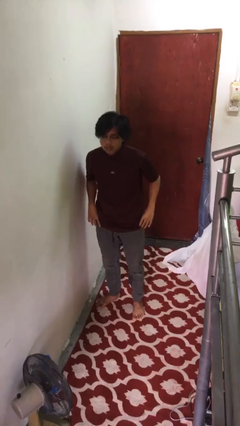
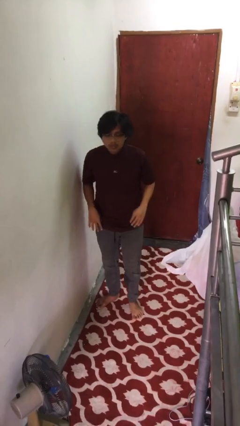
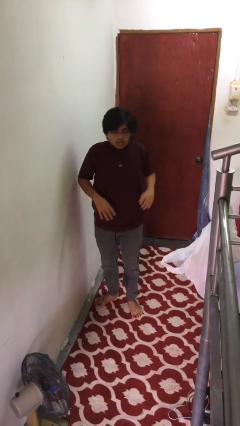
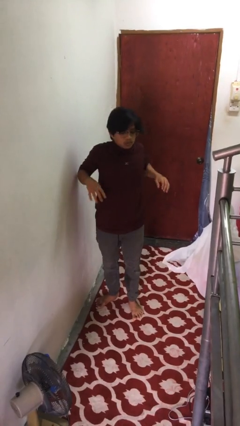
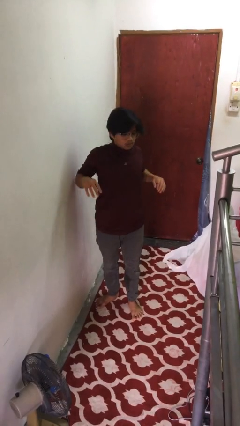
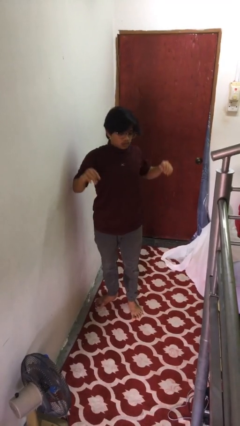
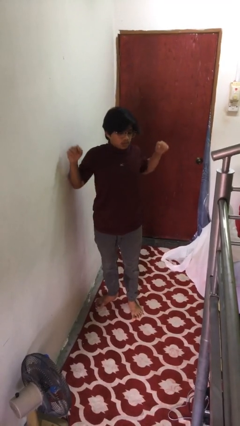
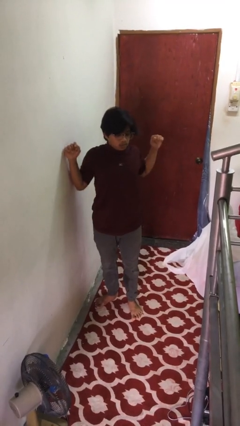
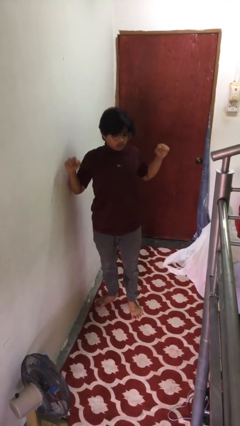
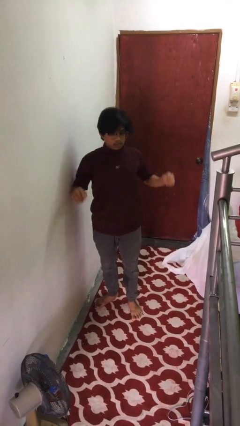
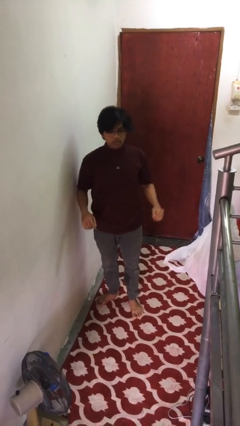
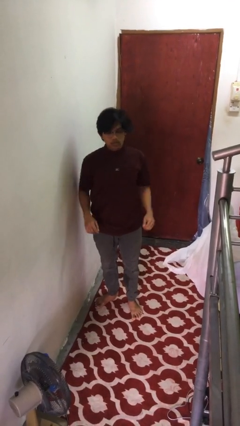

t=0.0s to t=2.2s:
person stretches arms to side

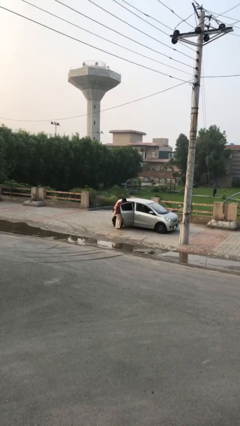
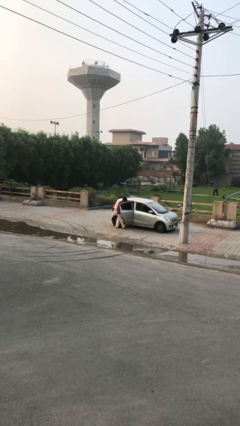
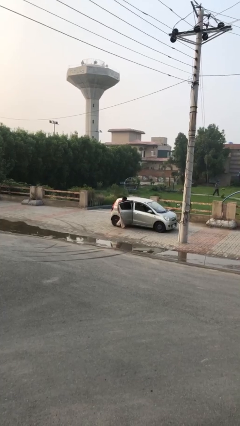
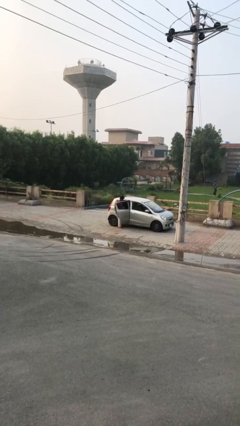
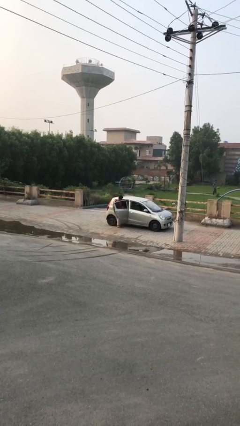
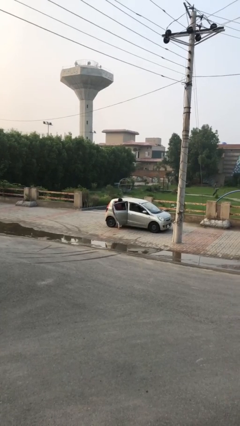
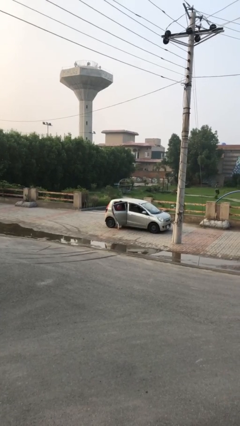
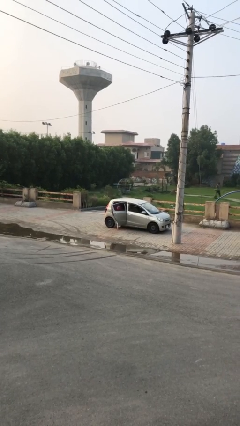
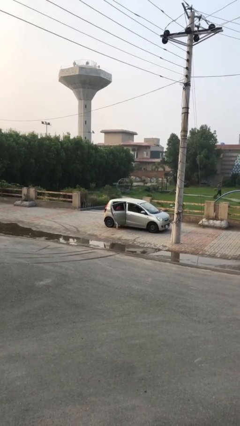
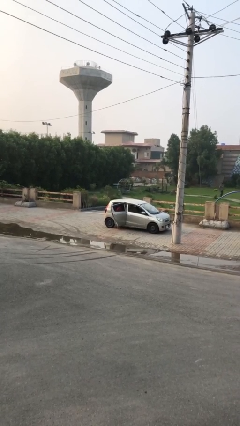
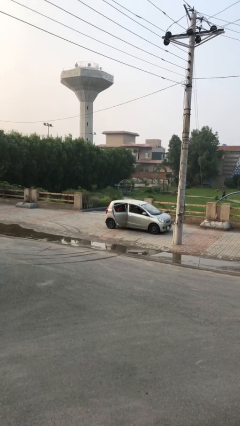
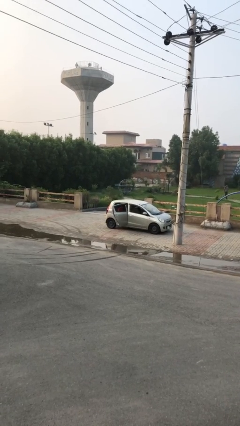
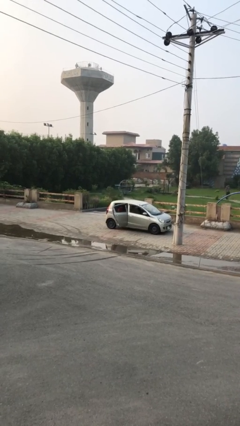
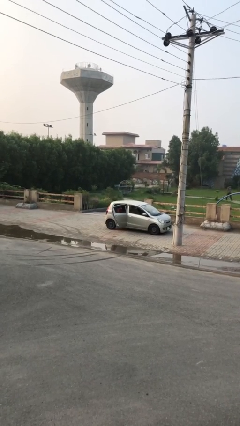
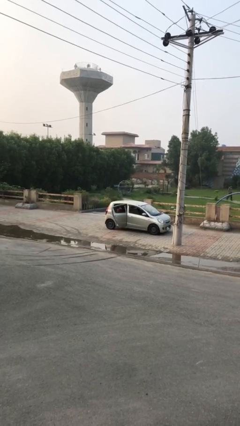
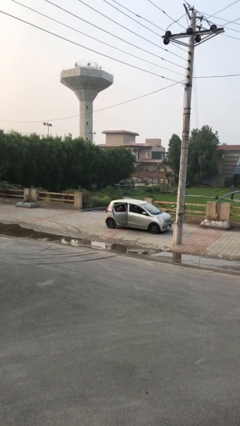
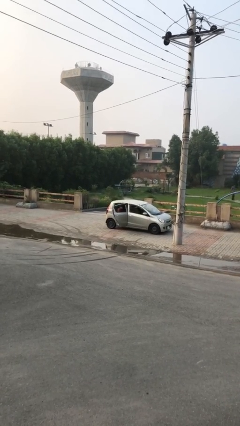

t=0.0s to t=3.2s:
person enters car

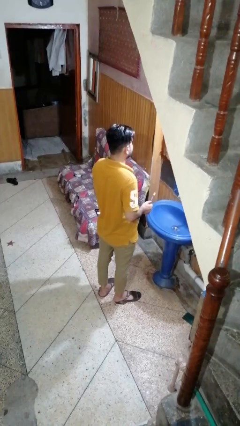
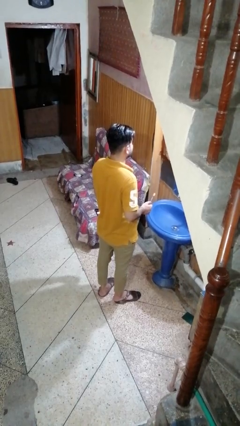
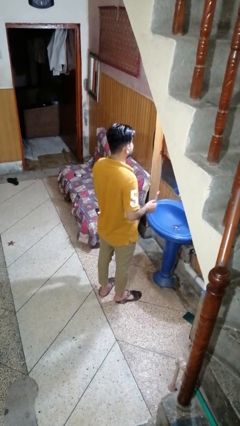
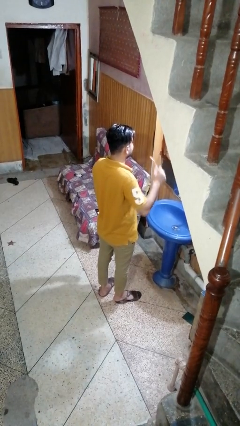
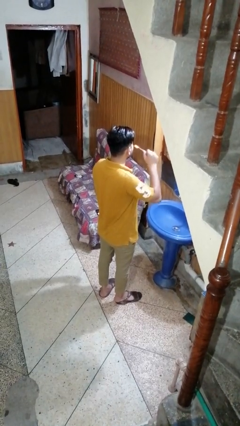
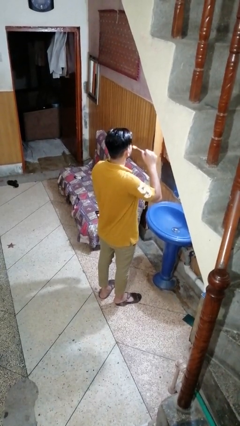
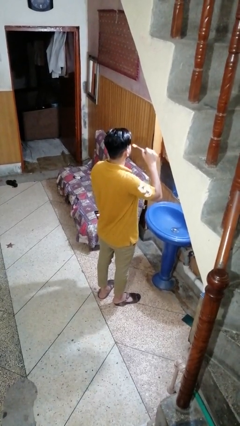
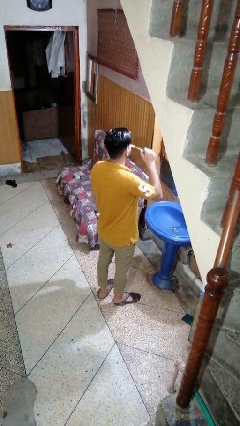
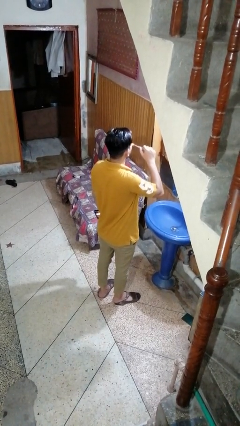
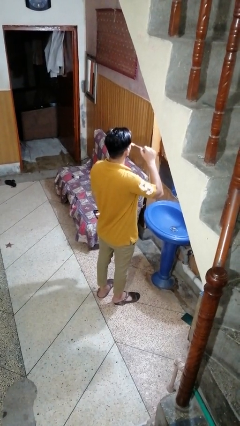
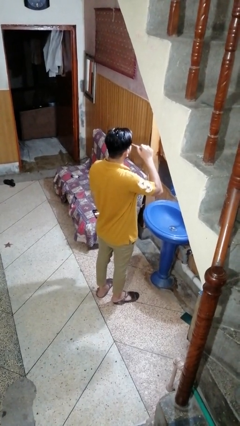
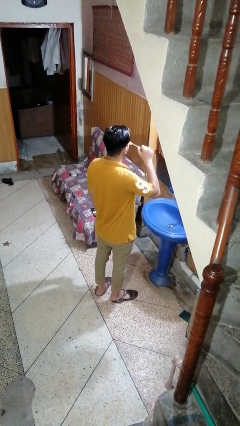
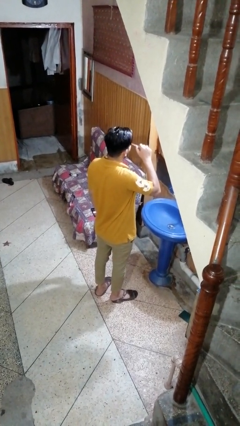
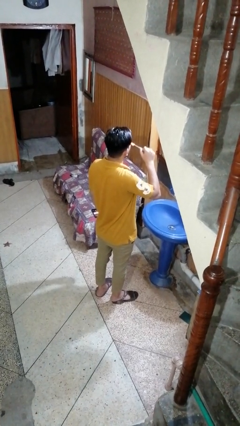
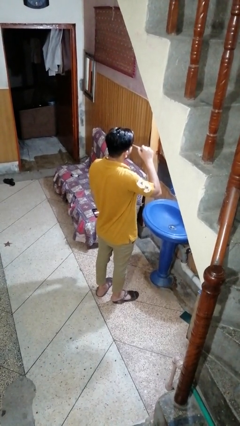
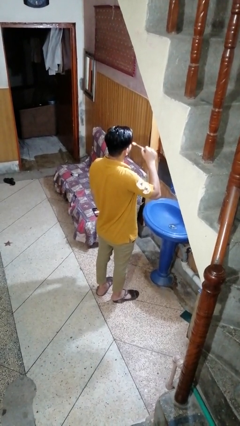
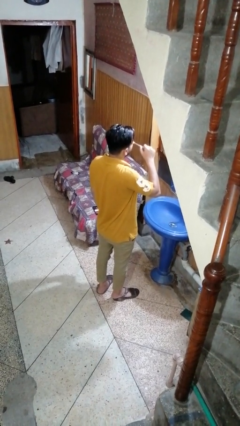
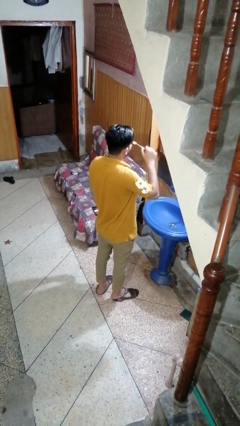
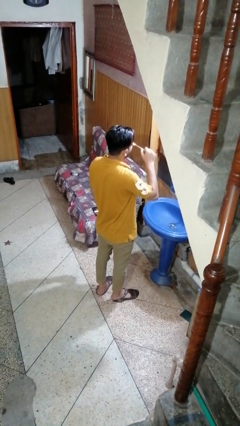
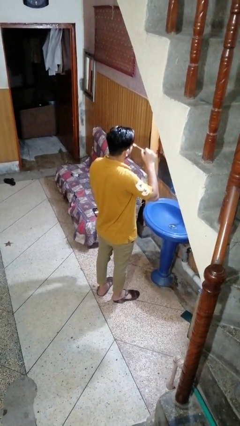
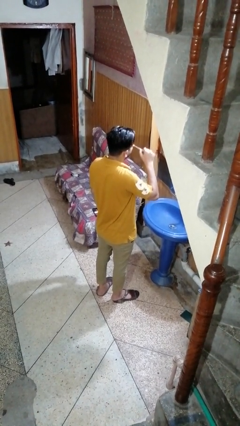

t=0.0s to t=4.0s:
person brushes teeth

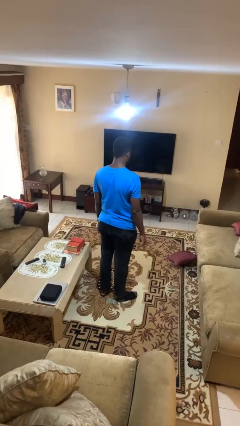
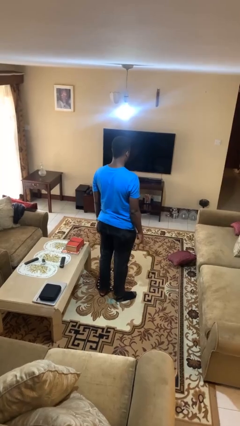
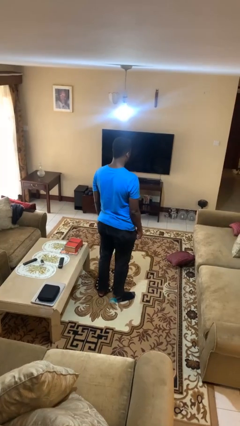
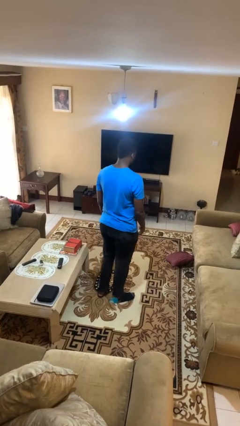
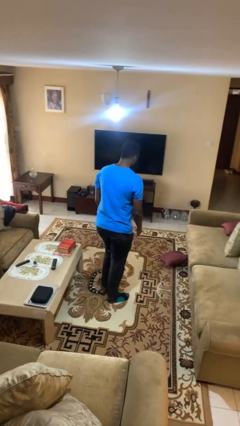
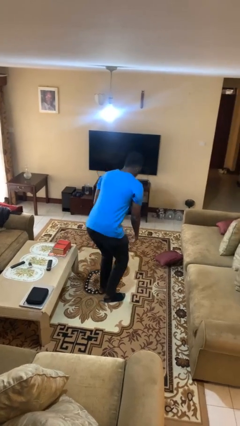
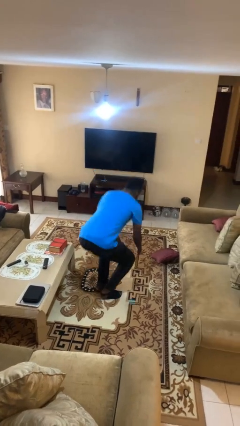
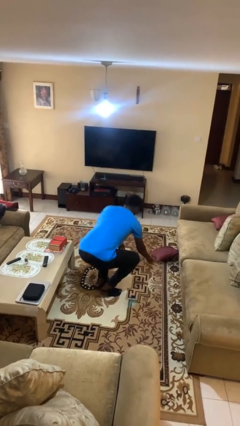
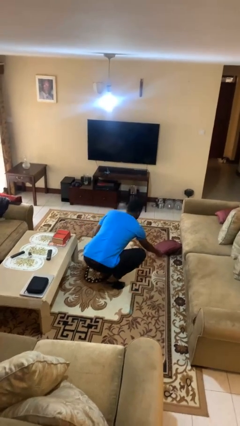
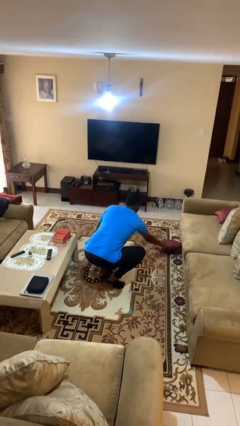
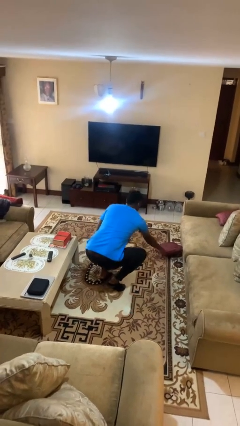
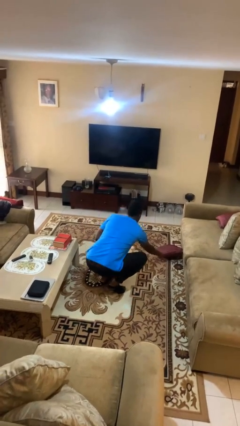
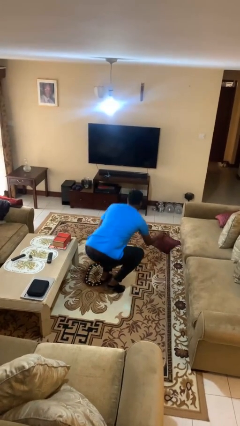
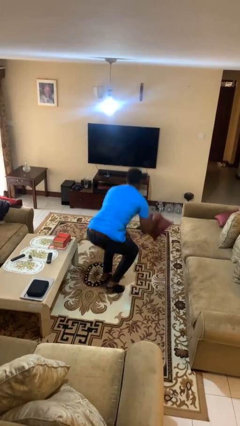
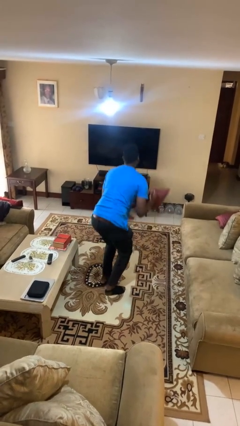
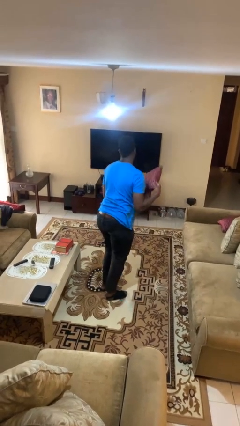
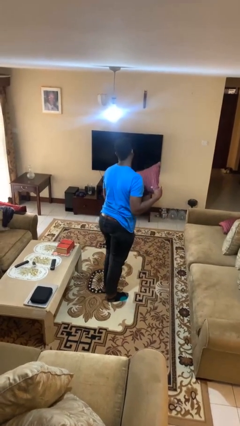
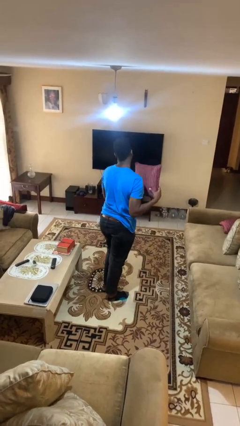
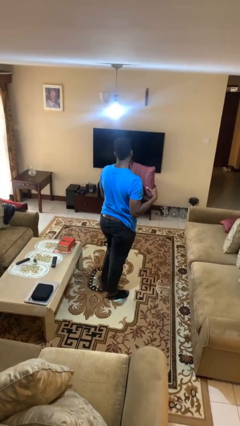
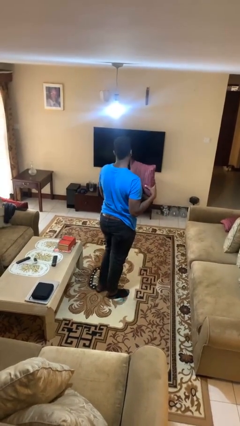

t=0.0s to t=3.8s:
person picks up object from floor

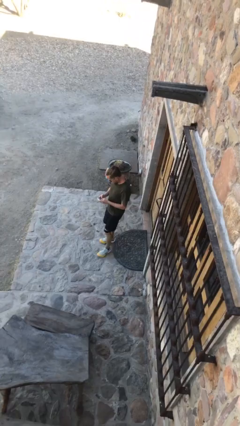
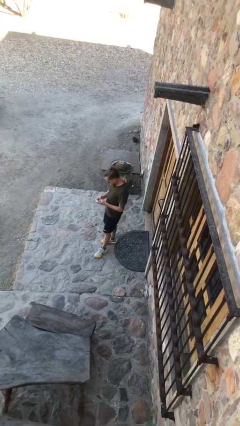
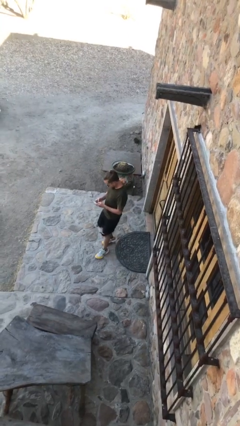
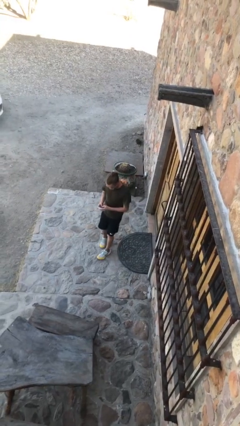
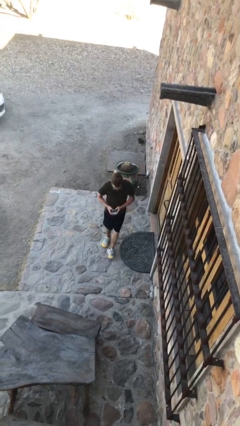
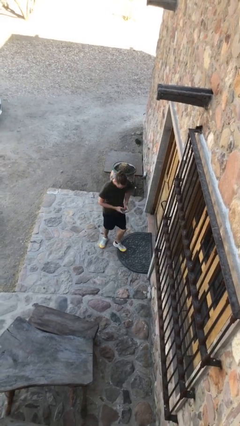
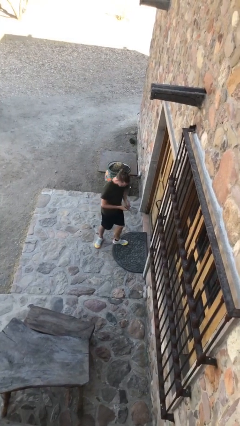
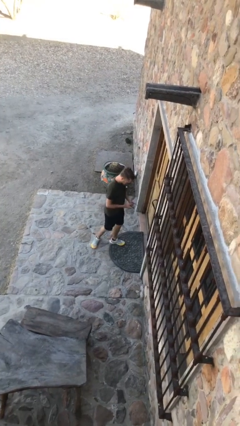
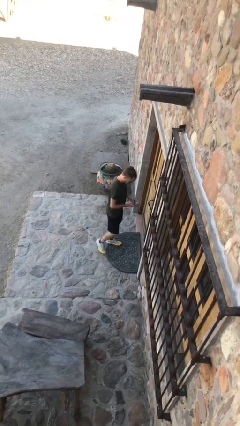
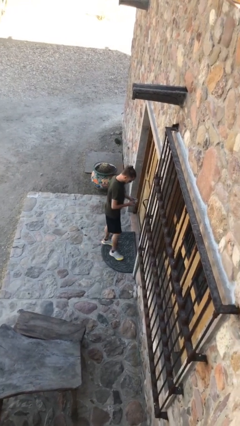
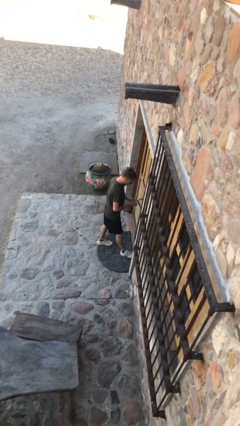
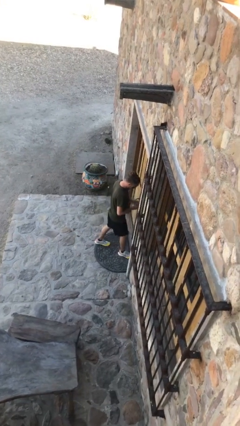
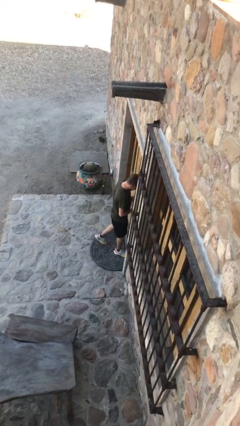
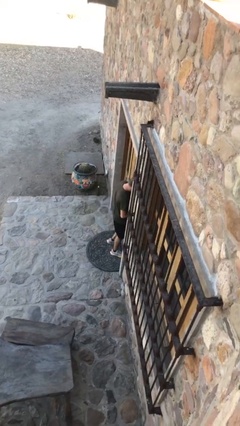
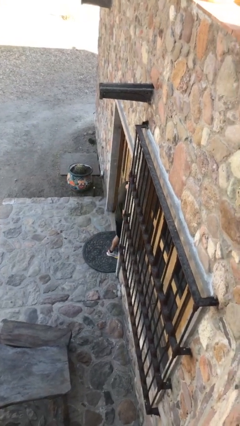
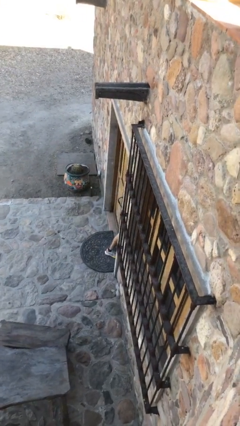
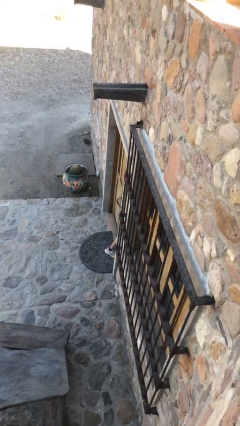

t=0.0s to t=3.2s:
person exits scene through structure

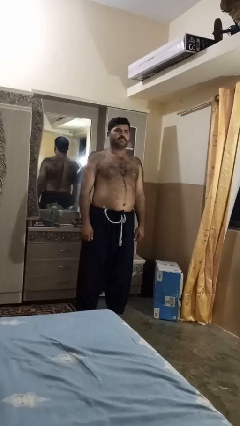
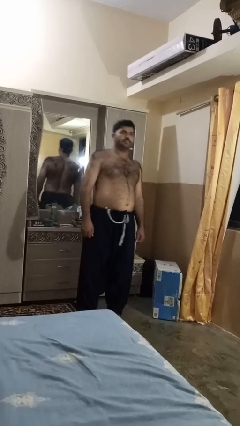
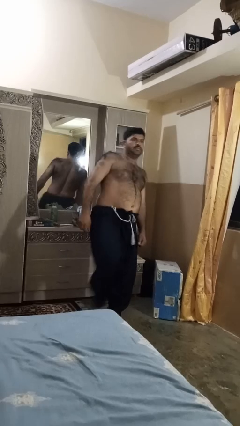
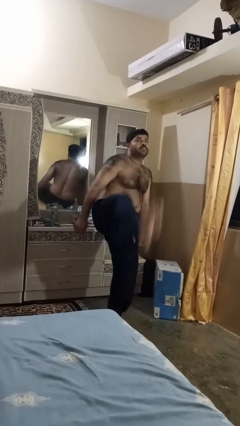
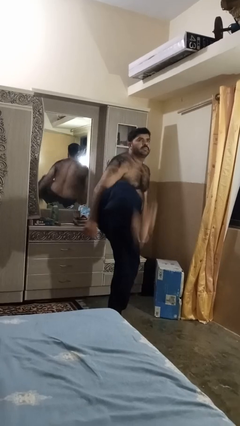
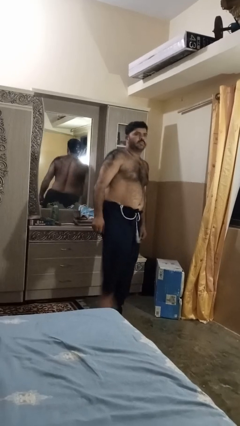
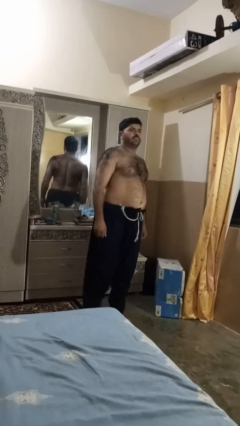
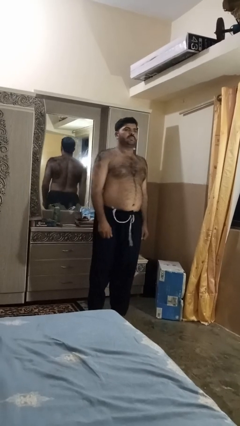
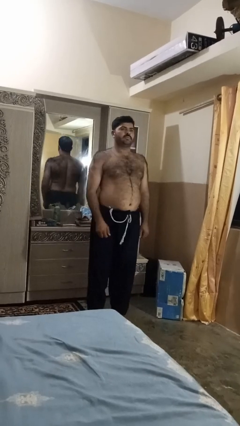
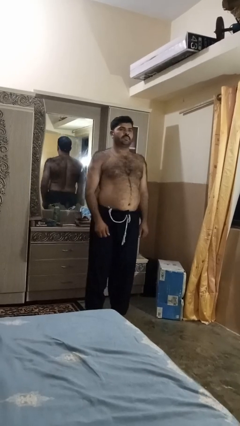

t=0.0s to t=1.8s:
person karate kicks
